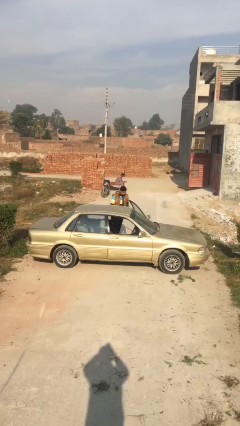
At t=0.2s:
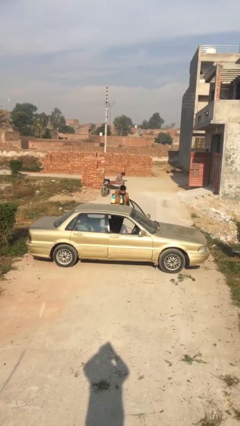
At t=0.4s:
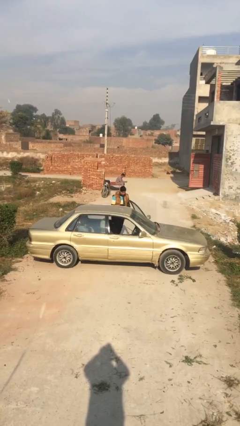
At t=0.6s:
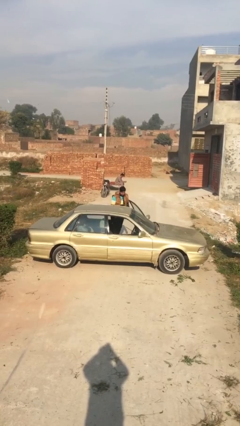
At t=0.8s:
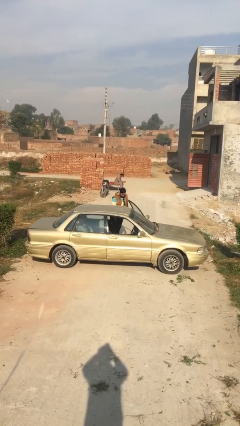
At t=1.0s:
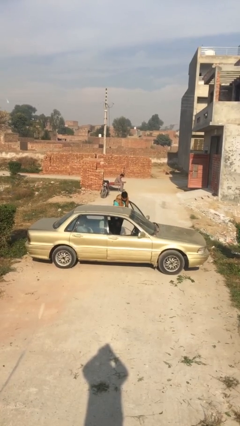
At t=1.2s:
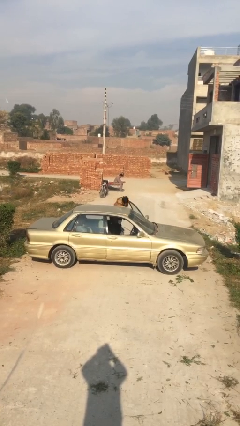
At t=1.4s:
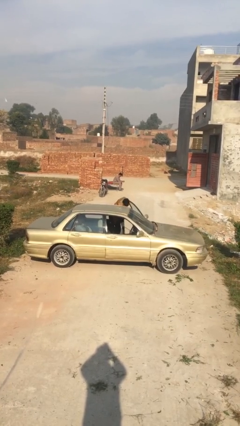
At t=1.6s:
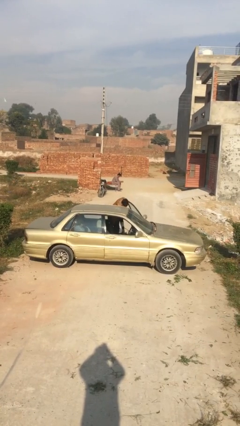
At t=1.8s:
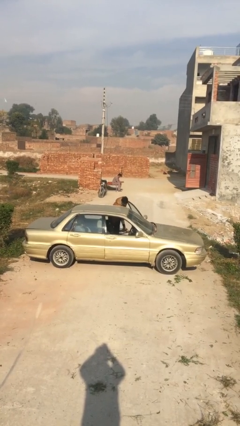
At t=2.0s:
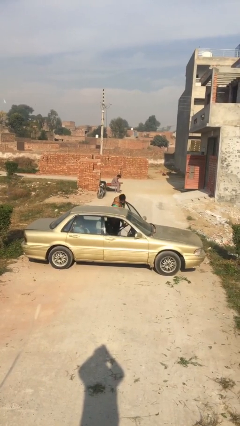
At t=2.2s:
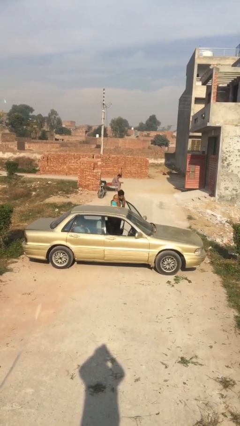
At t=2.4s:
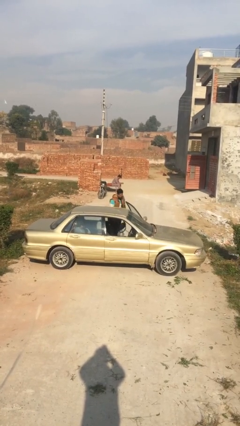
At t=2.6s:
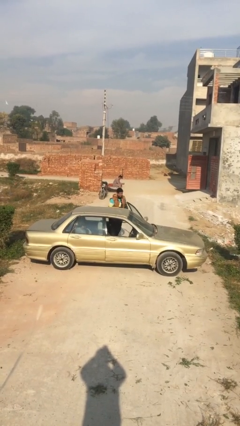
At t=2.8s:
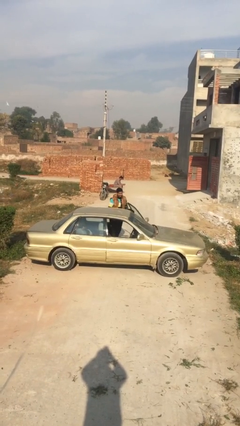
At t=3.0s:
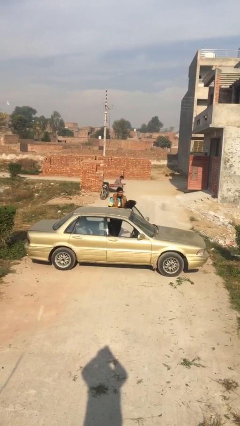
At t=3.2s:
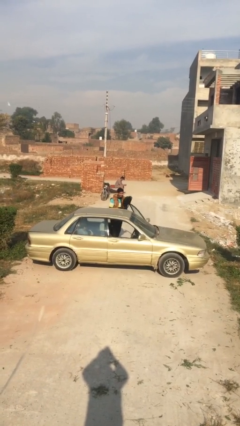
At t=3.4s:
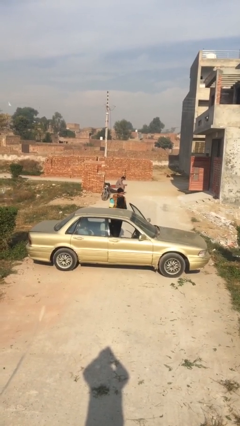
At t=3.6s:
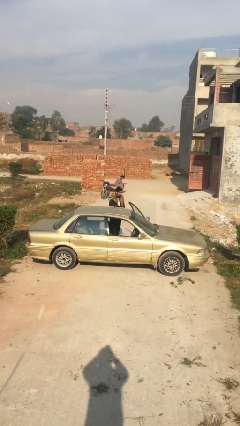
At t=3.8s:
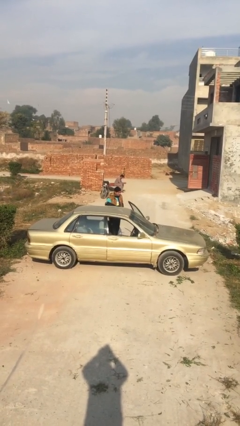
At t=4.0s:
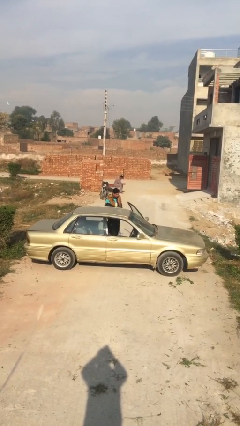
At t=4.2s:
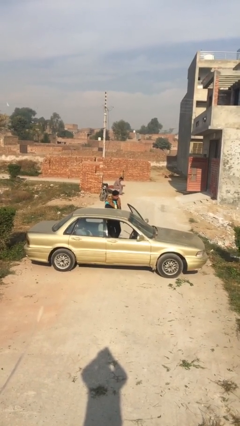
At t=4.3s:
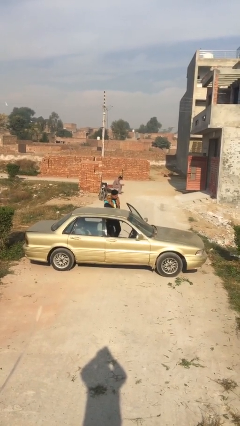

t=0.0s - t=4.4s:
person unloads car

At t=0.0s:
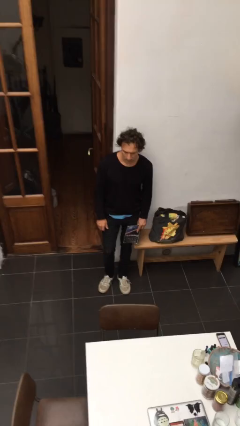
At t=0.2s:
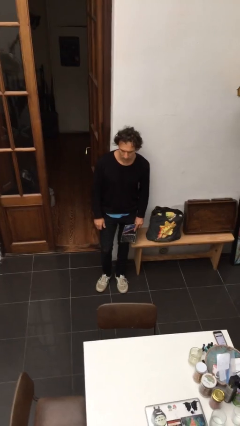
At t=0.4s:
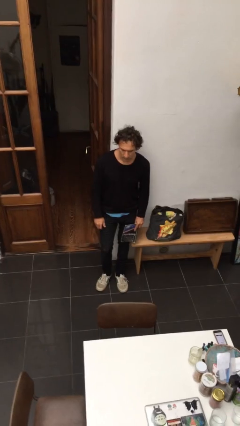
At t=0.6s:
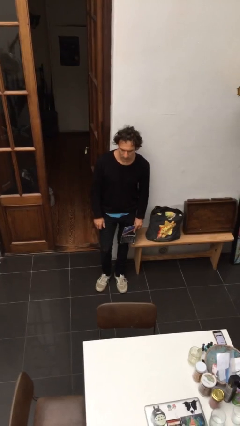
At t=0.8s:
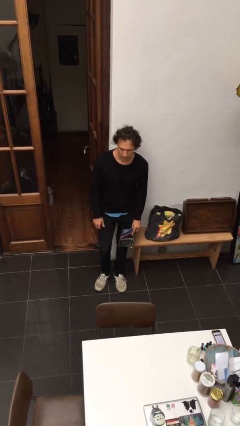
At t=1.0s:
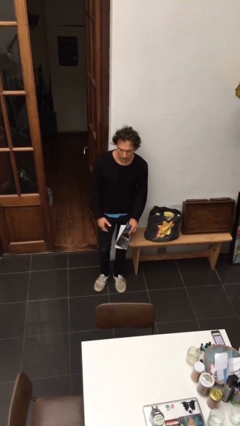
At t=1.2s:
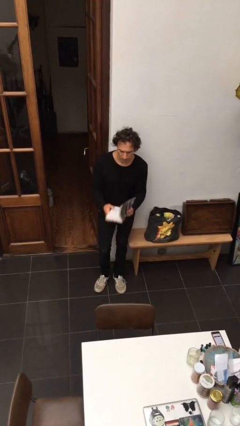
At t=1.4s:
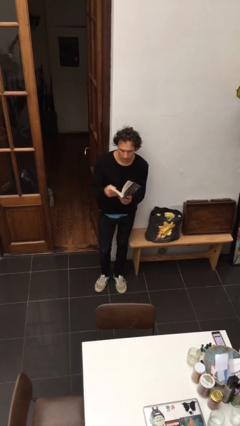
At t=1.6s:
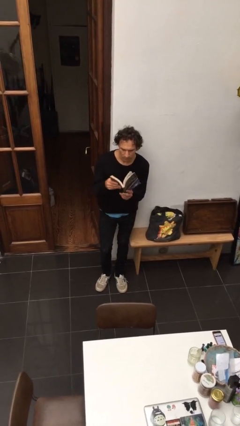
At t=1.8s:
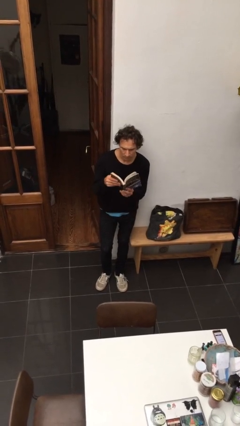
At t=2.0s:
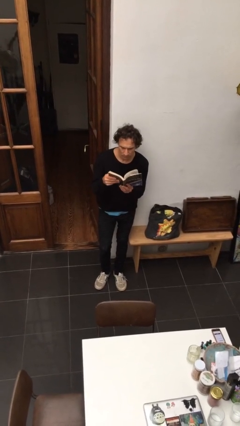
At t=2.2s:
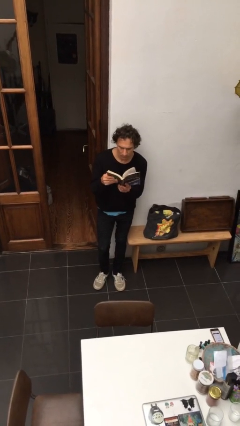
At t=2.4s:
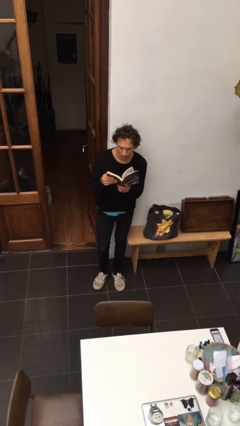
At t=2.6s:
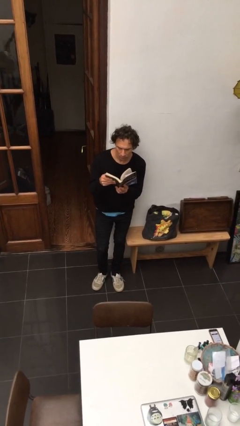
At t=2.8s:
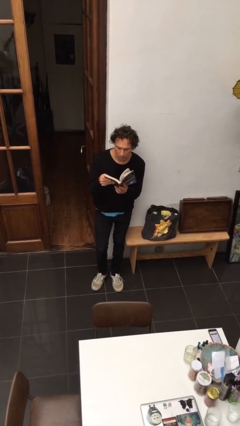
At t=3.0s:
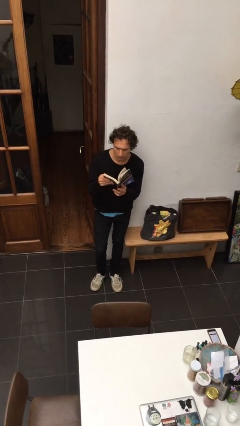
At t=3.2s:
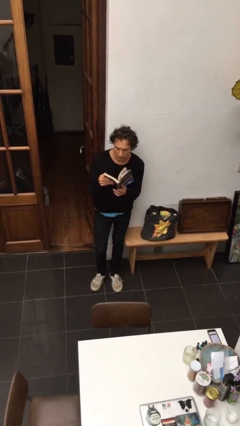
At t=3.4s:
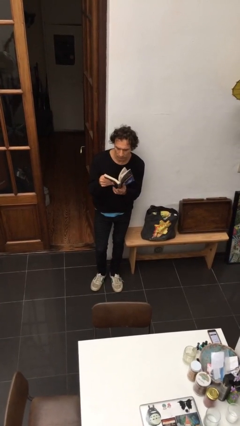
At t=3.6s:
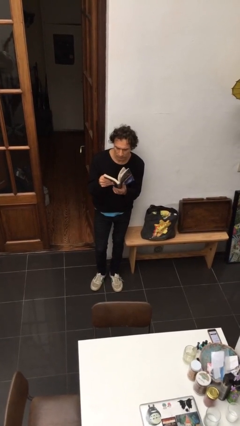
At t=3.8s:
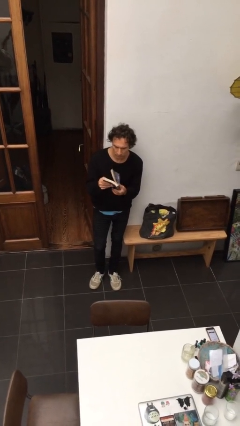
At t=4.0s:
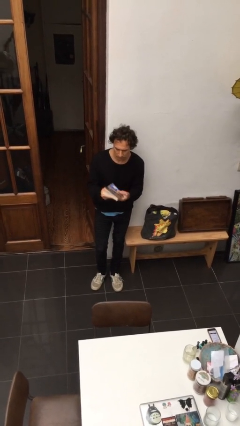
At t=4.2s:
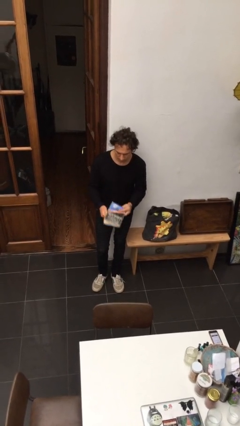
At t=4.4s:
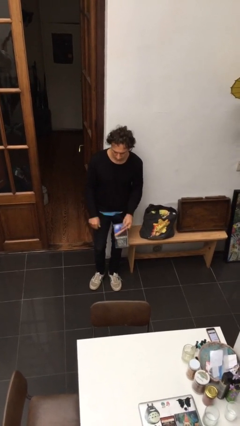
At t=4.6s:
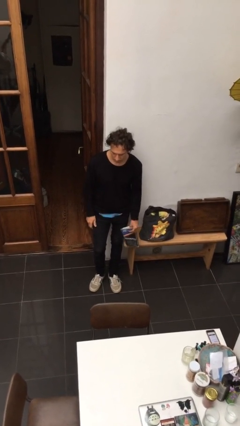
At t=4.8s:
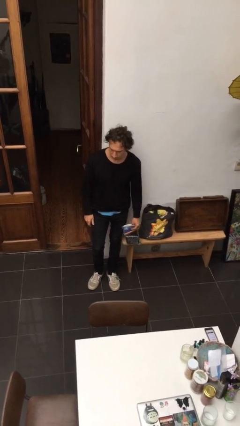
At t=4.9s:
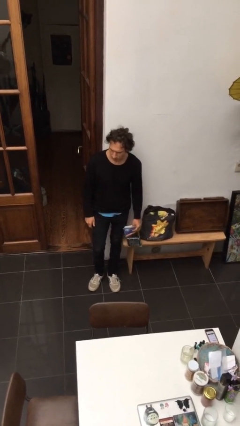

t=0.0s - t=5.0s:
person reads document

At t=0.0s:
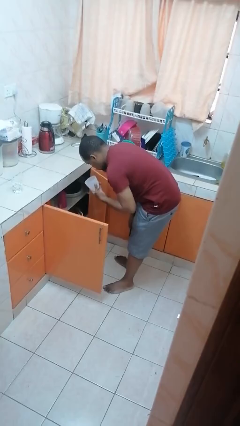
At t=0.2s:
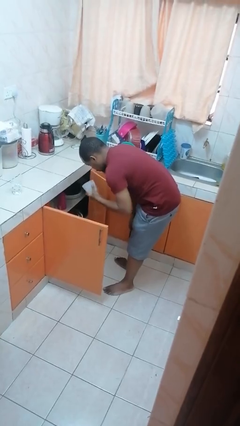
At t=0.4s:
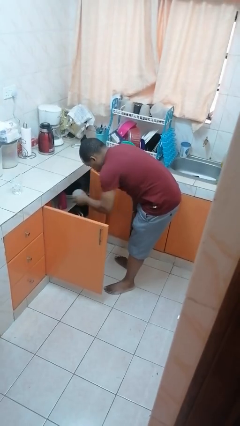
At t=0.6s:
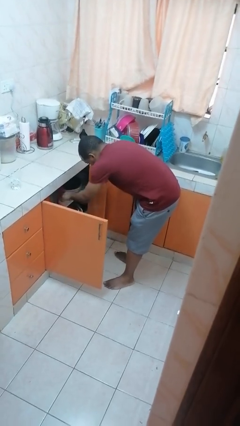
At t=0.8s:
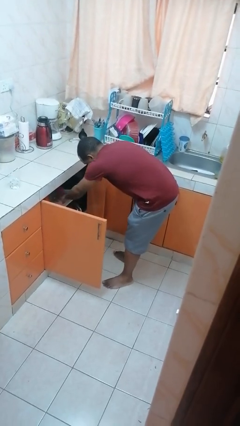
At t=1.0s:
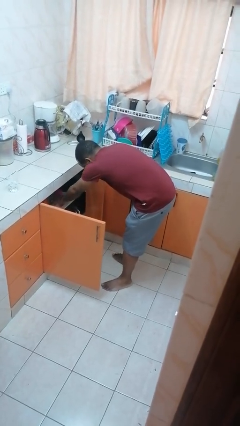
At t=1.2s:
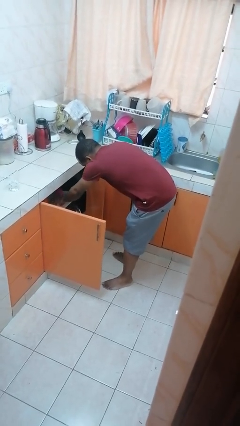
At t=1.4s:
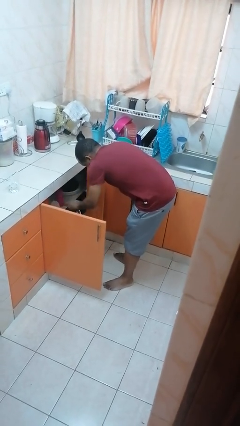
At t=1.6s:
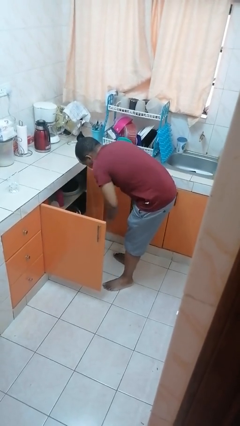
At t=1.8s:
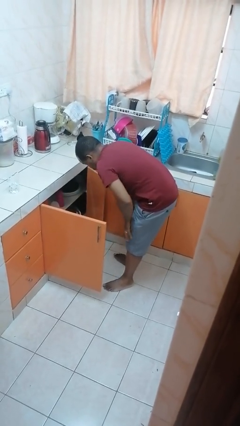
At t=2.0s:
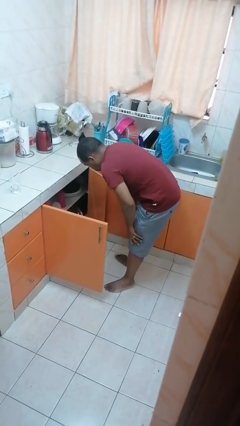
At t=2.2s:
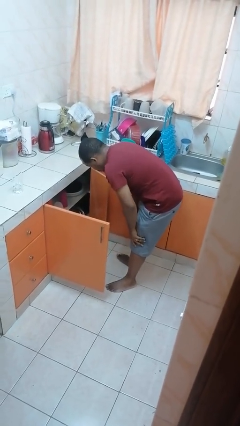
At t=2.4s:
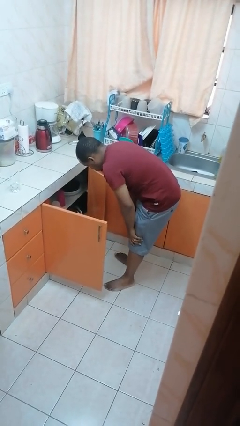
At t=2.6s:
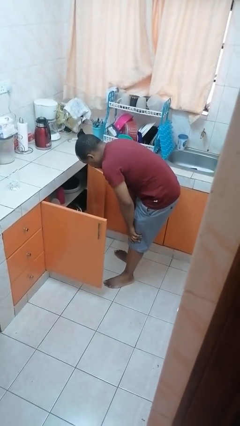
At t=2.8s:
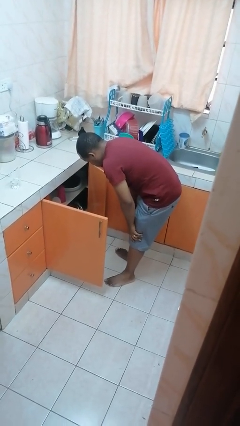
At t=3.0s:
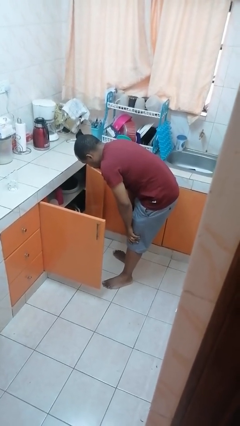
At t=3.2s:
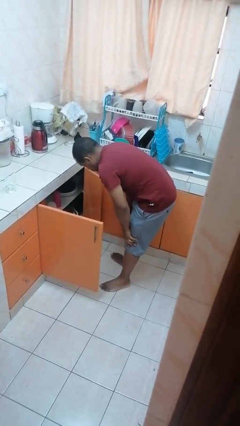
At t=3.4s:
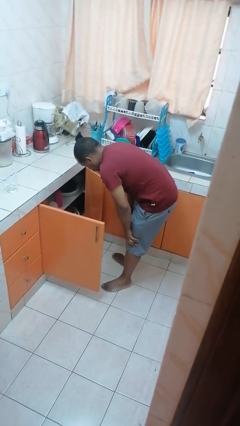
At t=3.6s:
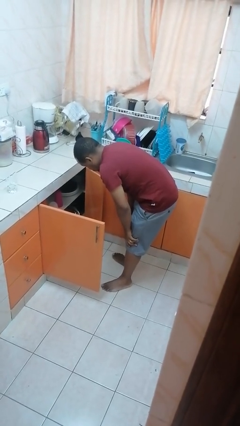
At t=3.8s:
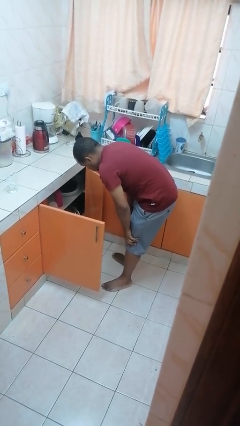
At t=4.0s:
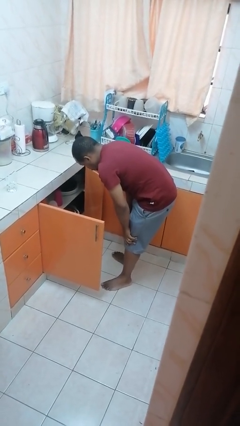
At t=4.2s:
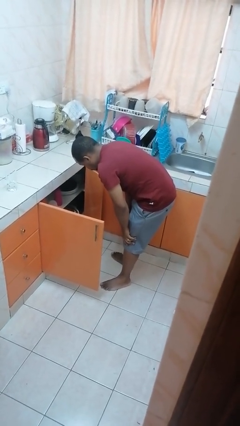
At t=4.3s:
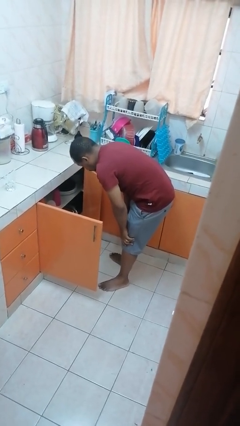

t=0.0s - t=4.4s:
person puts object in cabinet

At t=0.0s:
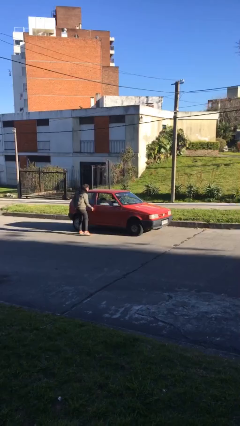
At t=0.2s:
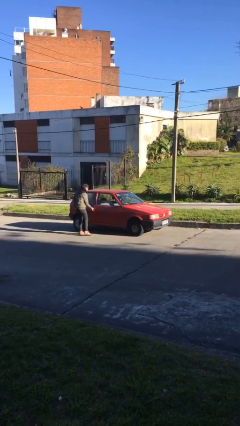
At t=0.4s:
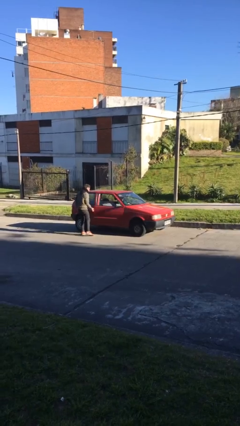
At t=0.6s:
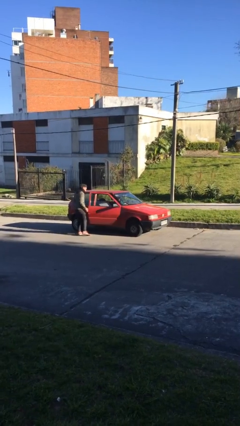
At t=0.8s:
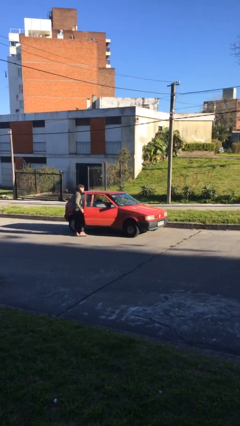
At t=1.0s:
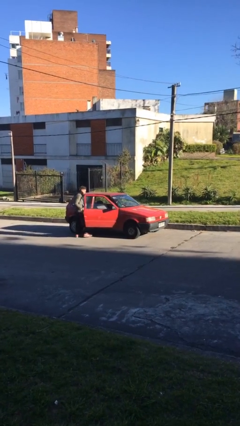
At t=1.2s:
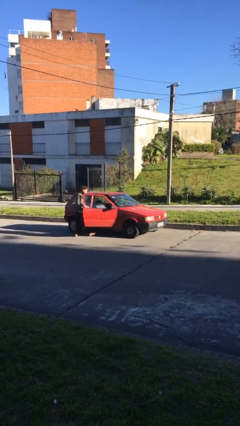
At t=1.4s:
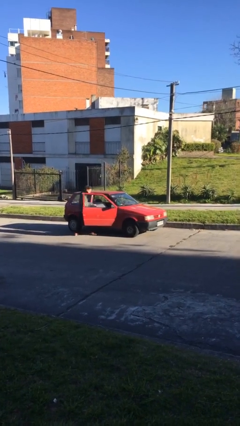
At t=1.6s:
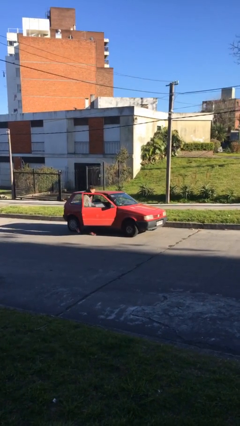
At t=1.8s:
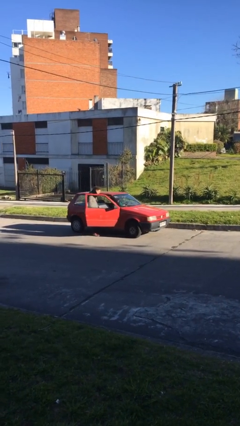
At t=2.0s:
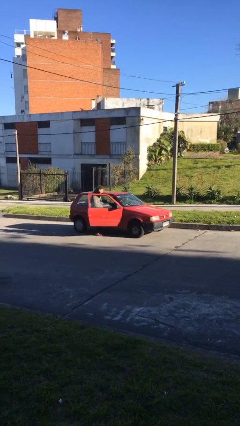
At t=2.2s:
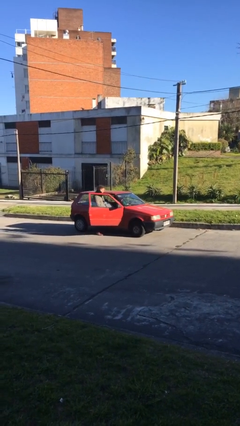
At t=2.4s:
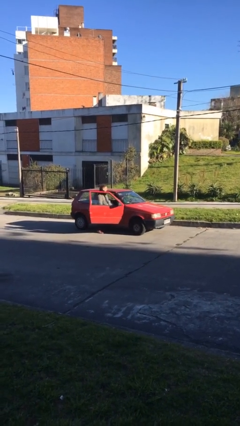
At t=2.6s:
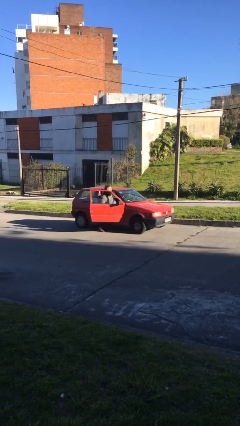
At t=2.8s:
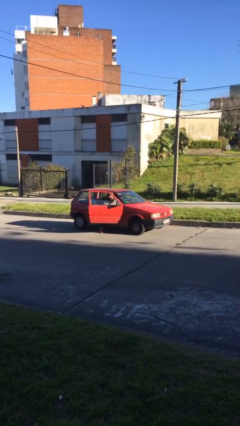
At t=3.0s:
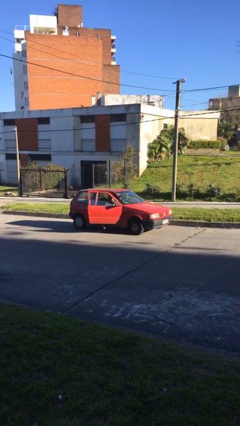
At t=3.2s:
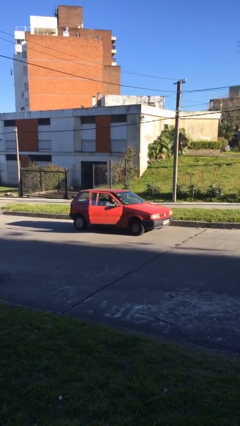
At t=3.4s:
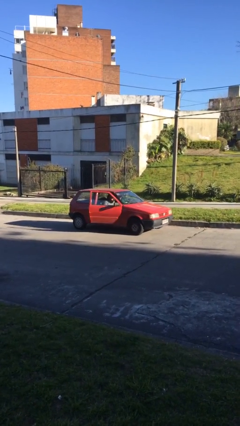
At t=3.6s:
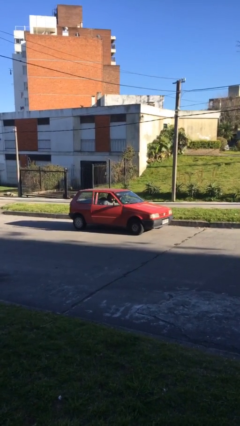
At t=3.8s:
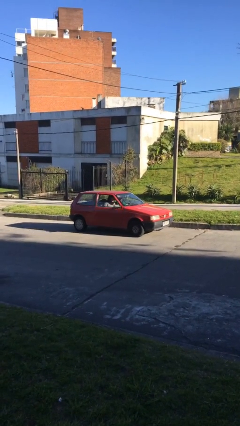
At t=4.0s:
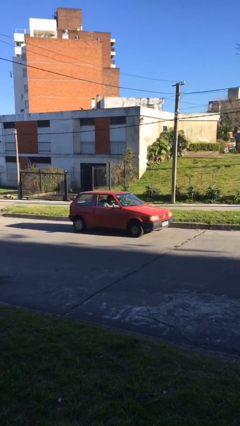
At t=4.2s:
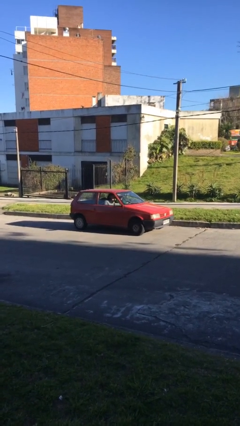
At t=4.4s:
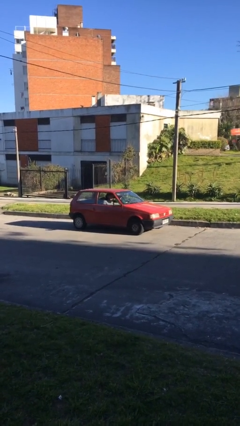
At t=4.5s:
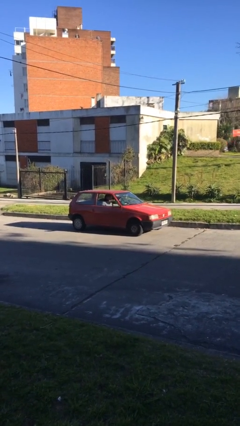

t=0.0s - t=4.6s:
car picks up person
